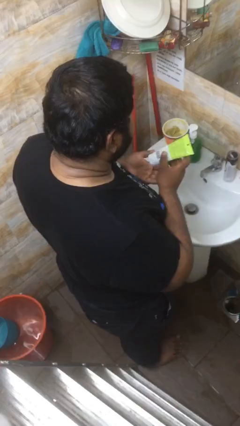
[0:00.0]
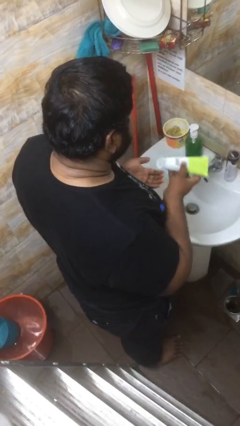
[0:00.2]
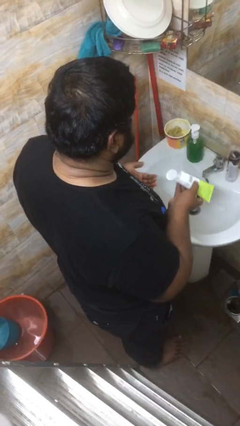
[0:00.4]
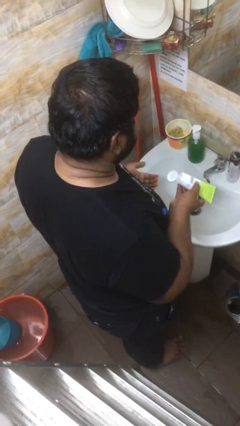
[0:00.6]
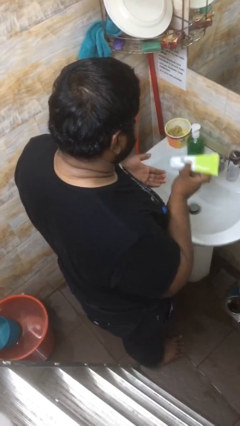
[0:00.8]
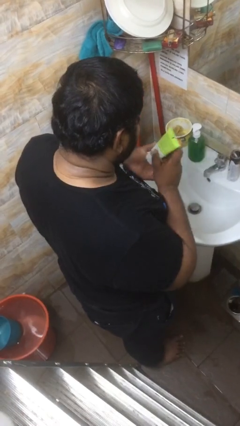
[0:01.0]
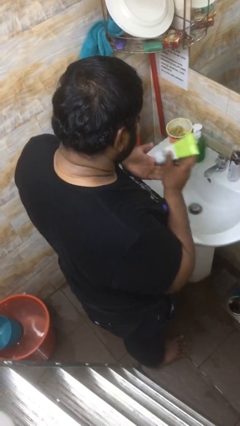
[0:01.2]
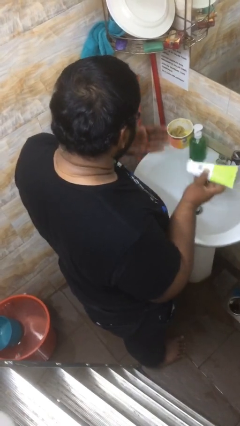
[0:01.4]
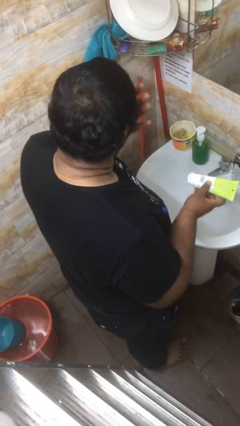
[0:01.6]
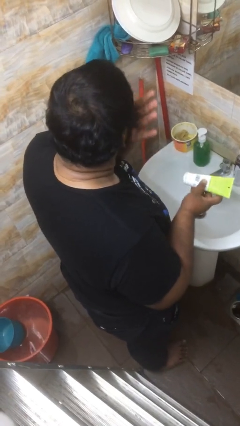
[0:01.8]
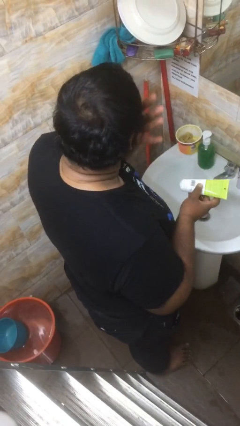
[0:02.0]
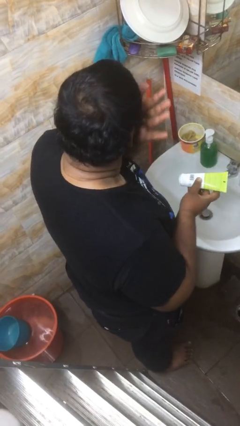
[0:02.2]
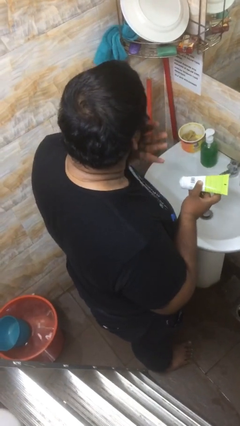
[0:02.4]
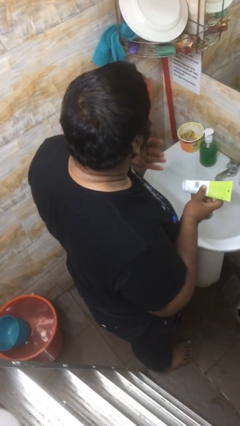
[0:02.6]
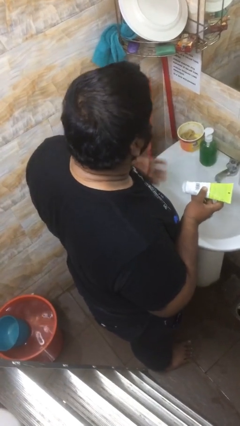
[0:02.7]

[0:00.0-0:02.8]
person applies facial moisturizer

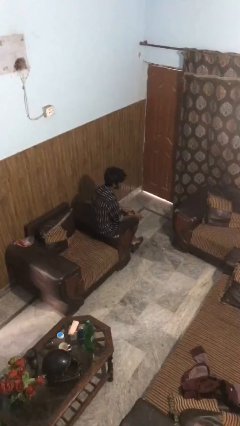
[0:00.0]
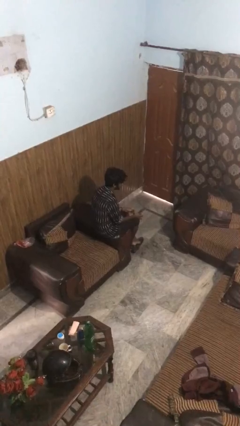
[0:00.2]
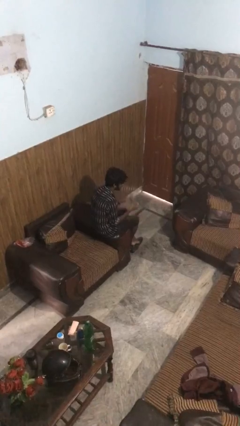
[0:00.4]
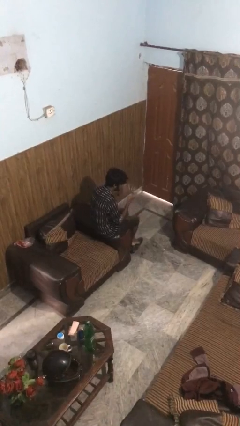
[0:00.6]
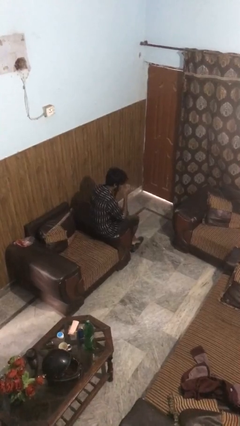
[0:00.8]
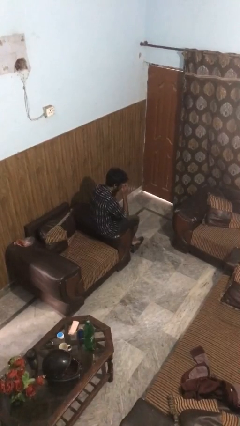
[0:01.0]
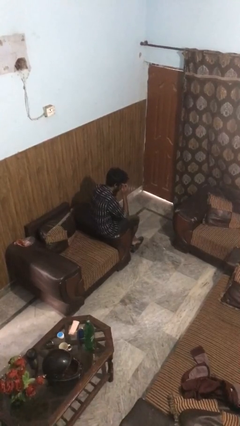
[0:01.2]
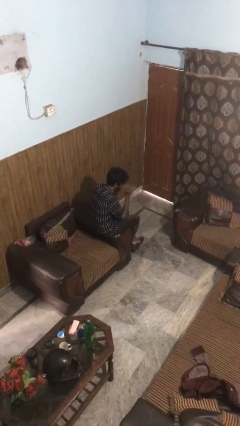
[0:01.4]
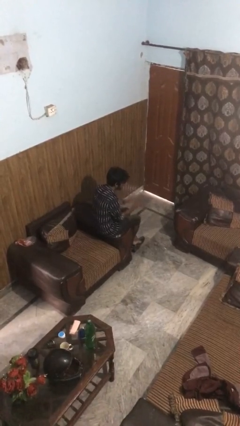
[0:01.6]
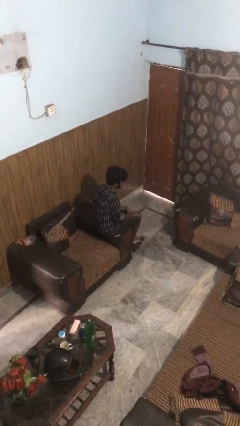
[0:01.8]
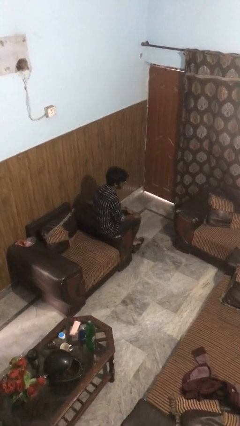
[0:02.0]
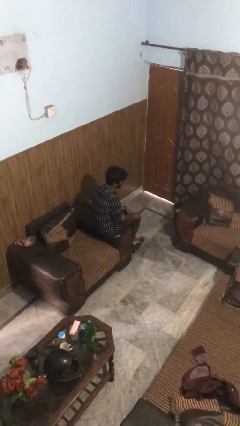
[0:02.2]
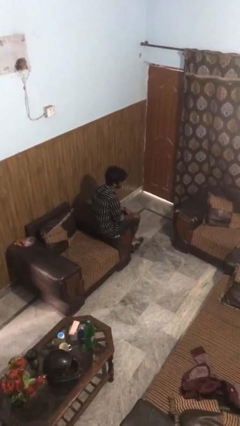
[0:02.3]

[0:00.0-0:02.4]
person puts on sunglasses

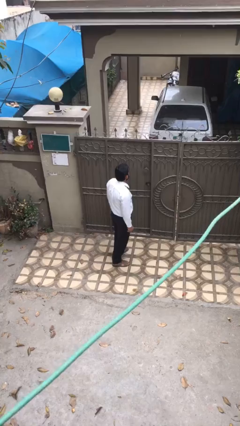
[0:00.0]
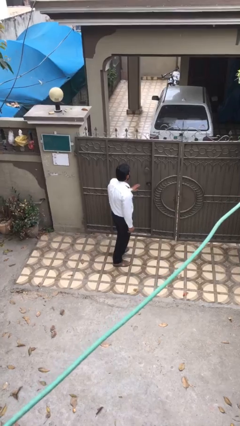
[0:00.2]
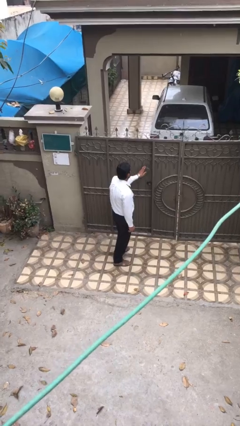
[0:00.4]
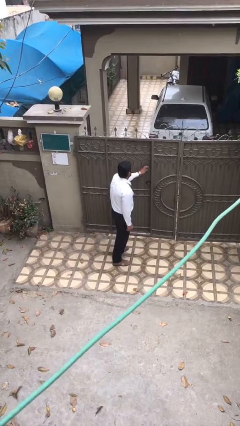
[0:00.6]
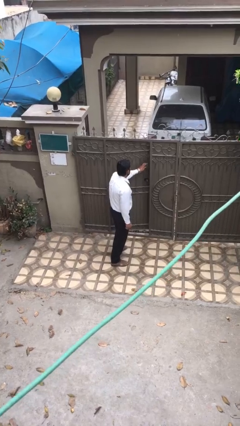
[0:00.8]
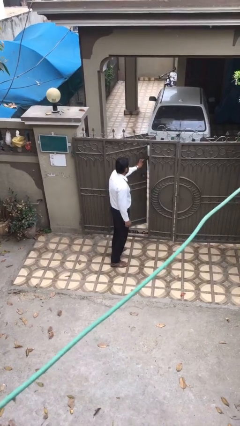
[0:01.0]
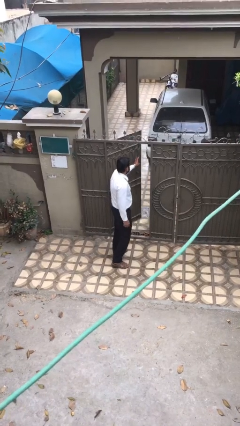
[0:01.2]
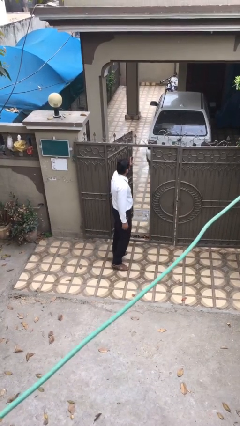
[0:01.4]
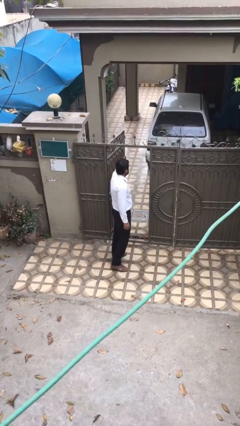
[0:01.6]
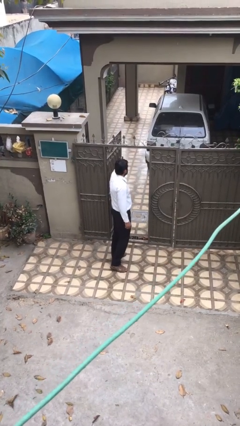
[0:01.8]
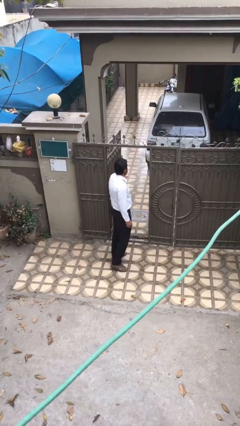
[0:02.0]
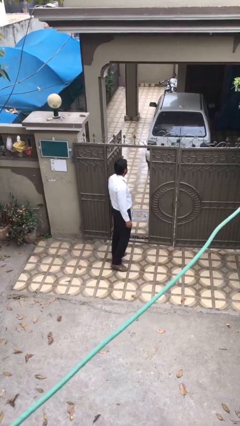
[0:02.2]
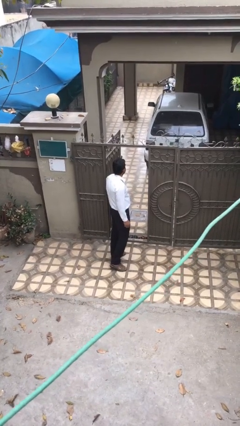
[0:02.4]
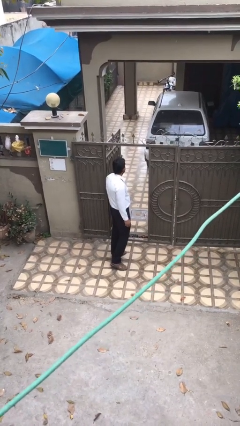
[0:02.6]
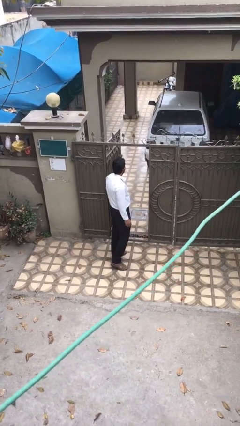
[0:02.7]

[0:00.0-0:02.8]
person opens facility door

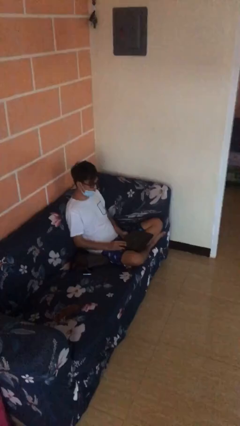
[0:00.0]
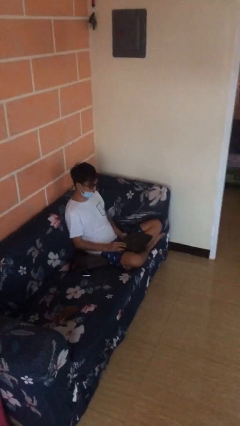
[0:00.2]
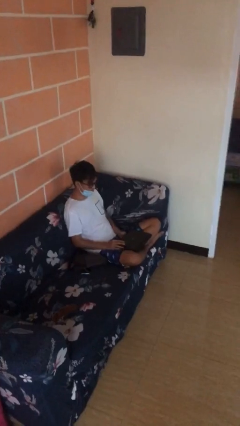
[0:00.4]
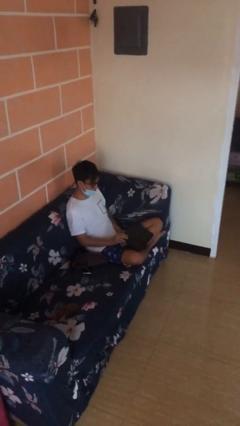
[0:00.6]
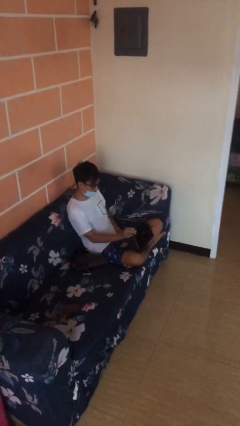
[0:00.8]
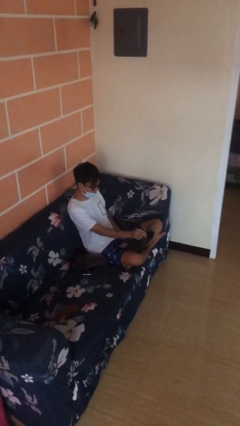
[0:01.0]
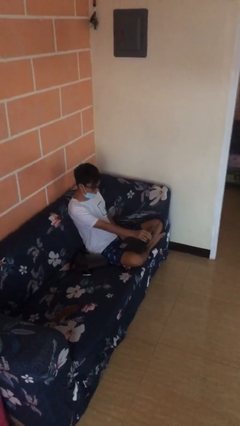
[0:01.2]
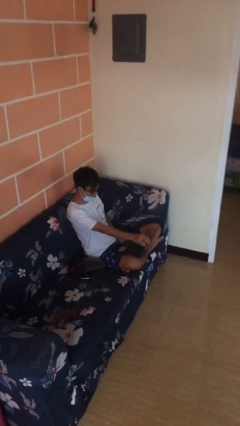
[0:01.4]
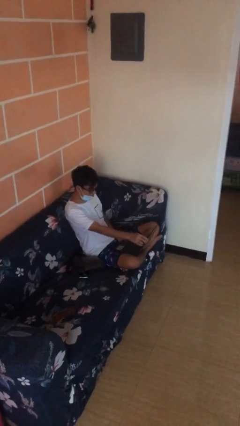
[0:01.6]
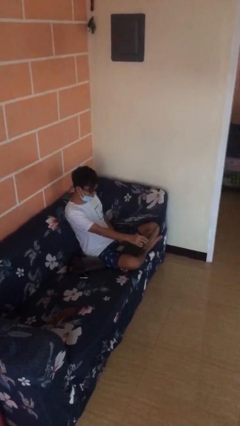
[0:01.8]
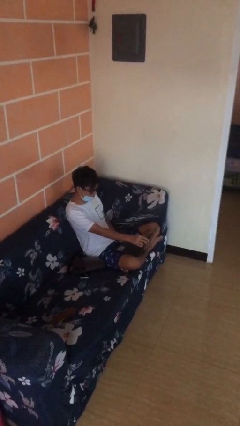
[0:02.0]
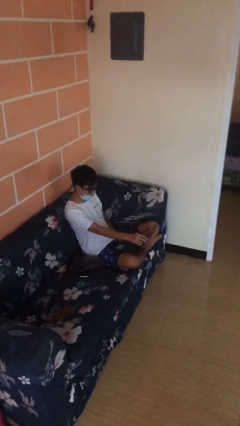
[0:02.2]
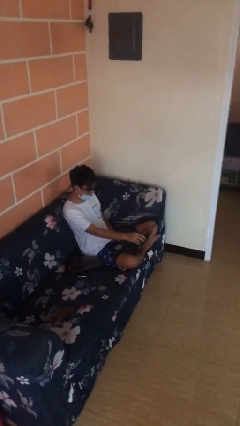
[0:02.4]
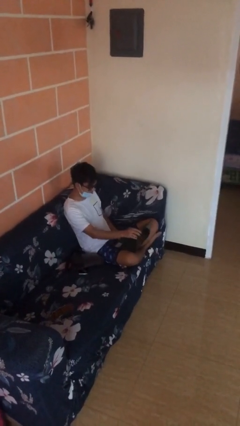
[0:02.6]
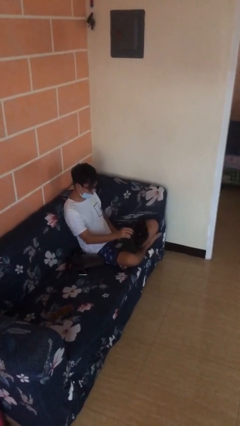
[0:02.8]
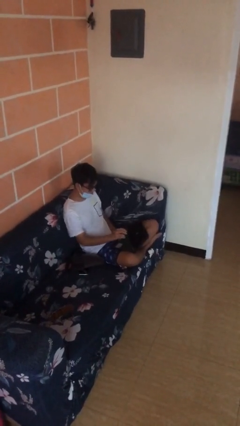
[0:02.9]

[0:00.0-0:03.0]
person interacts with laptop

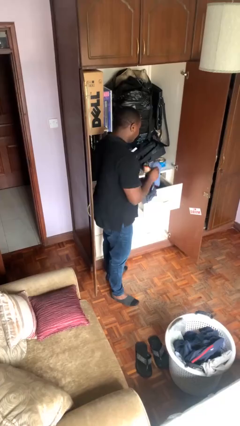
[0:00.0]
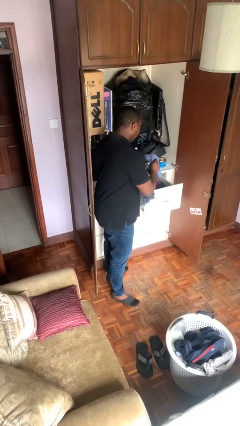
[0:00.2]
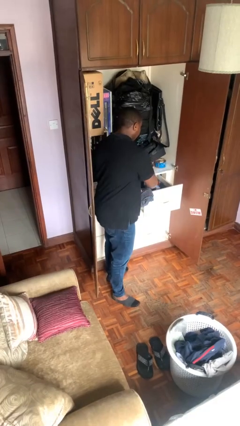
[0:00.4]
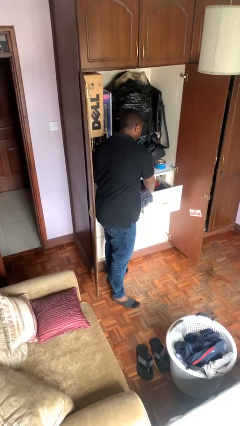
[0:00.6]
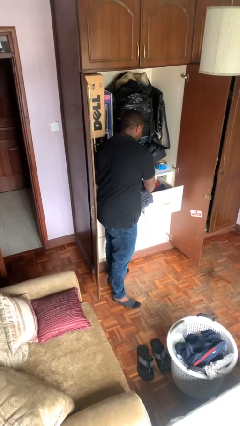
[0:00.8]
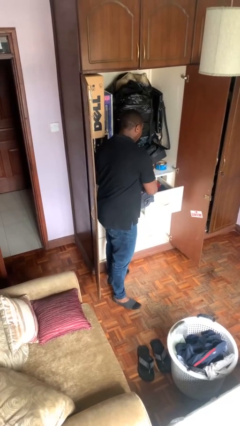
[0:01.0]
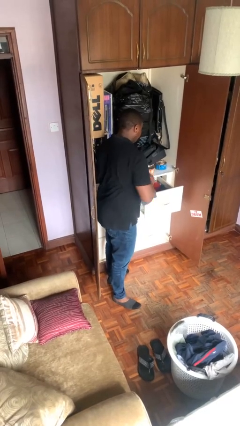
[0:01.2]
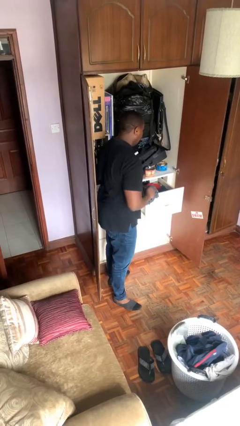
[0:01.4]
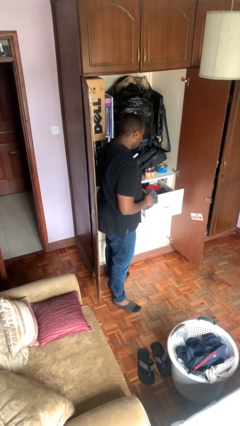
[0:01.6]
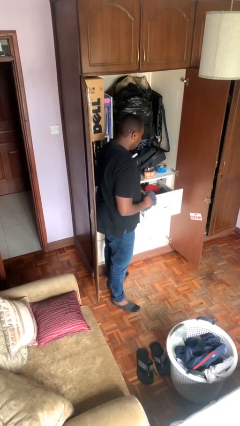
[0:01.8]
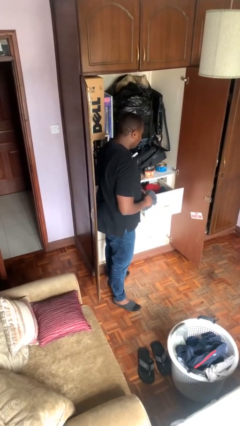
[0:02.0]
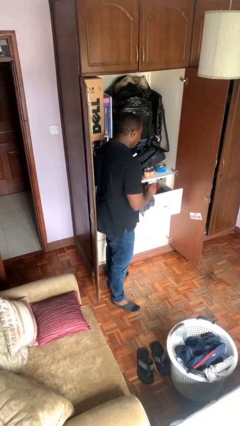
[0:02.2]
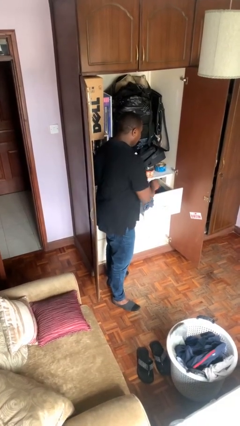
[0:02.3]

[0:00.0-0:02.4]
person puts clothes into dresser

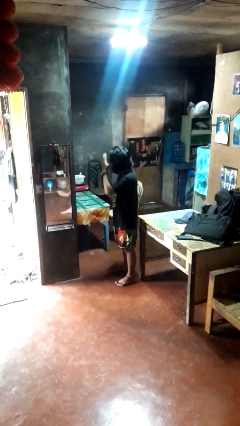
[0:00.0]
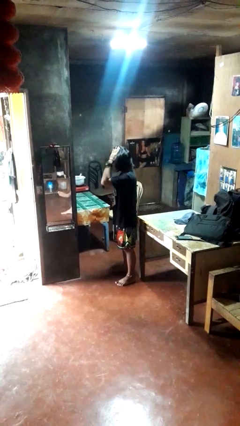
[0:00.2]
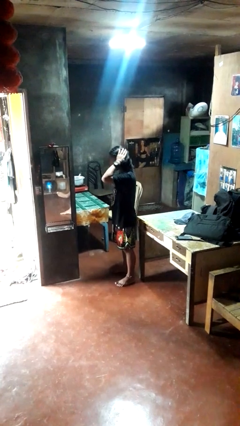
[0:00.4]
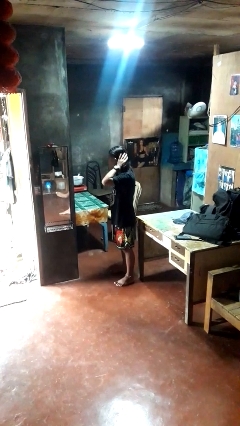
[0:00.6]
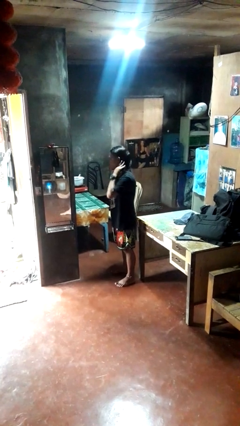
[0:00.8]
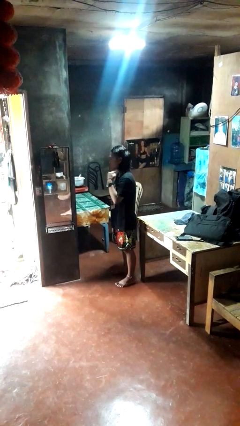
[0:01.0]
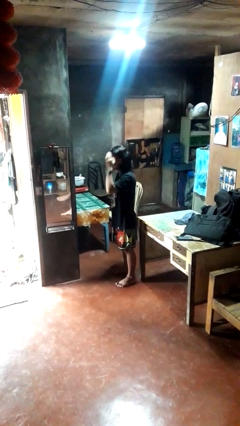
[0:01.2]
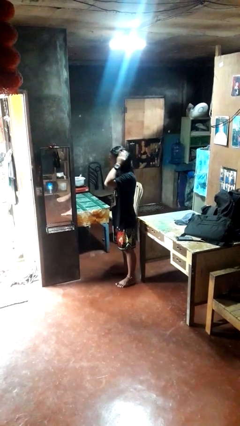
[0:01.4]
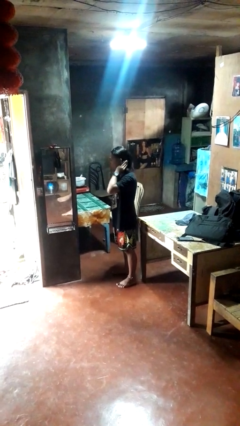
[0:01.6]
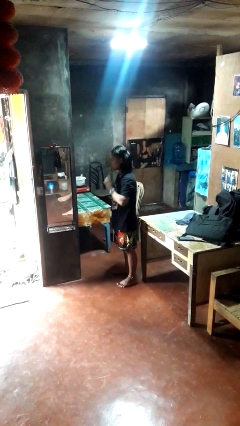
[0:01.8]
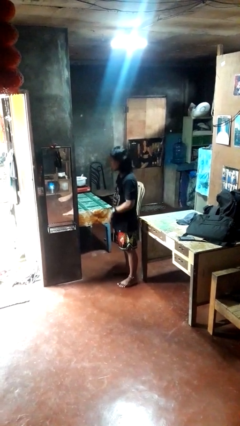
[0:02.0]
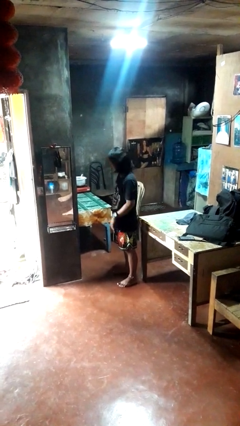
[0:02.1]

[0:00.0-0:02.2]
person strokes hair

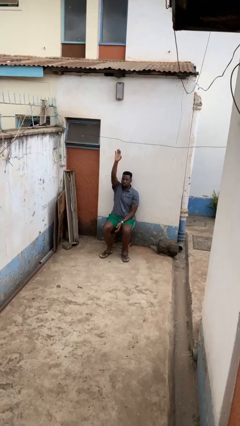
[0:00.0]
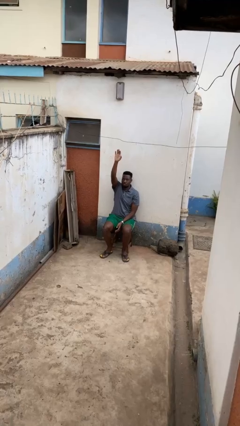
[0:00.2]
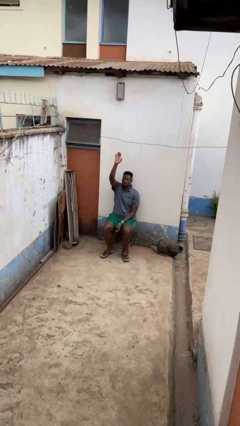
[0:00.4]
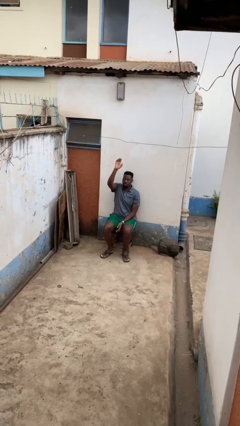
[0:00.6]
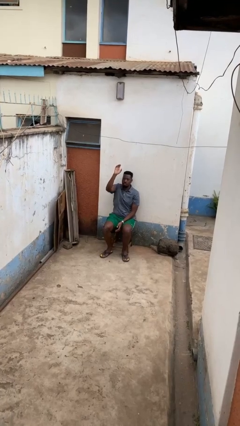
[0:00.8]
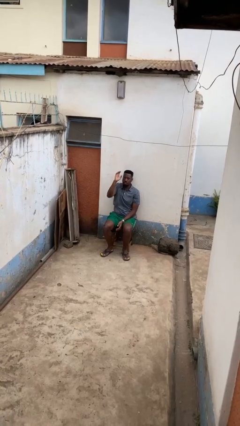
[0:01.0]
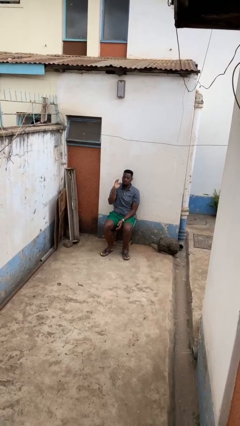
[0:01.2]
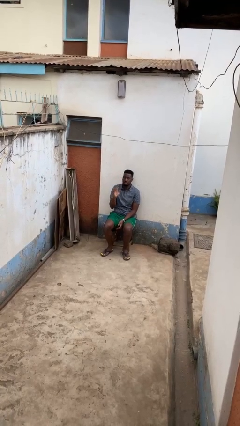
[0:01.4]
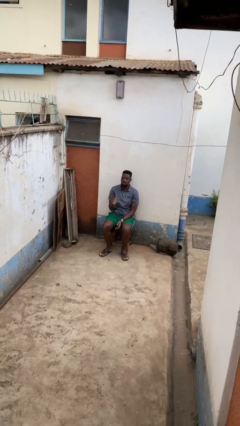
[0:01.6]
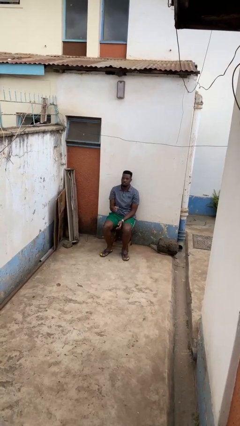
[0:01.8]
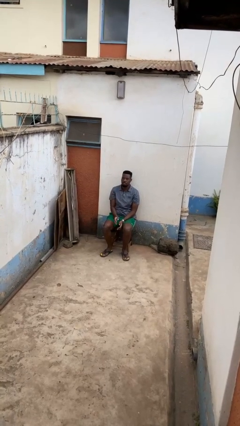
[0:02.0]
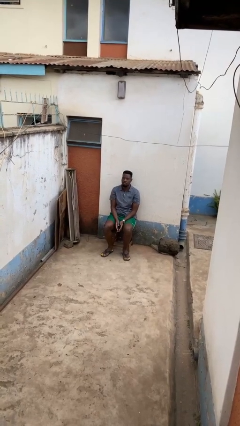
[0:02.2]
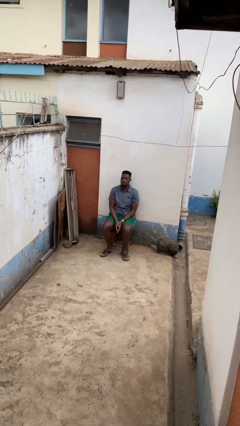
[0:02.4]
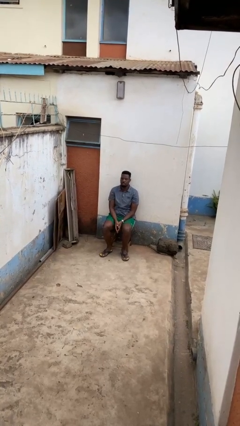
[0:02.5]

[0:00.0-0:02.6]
person gestures lower hand
